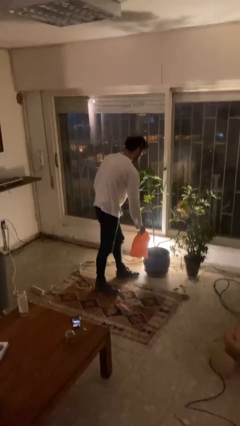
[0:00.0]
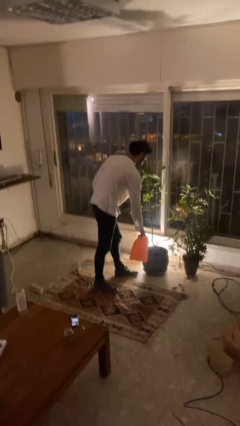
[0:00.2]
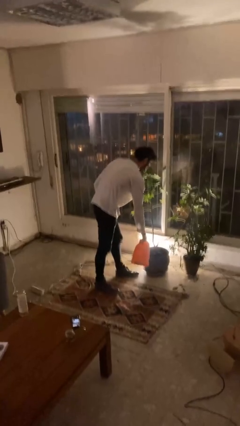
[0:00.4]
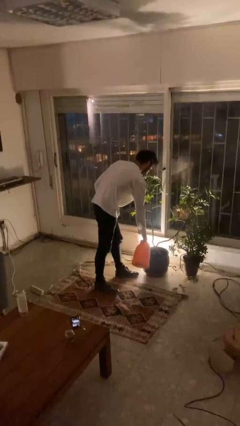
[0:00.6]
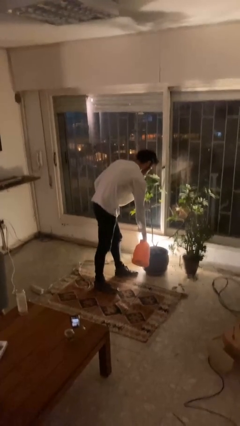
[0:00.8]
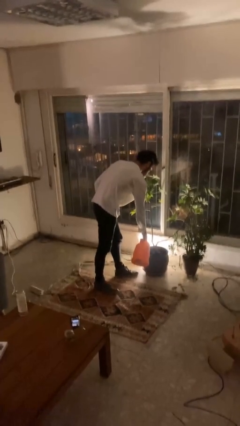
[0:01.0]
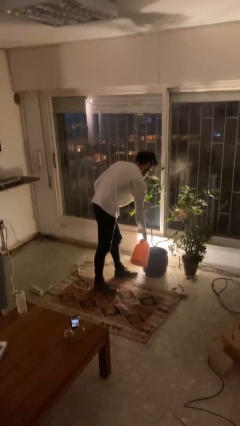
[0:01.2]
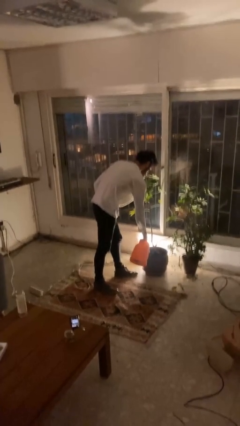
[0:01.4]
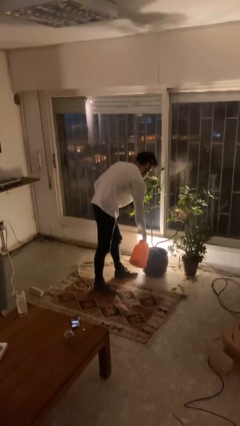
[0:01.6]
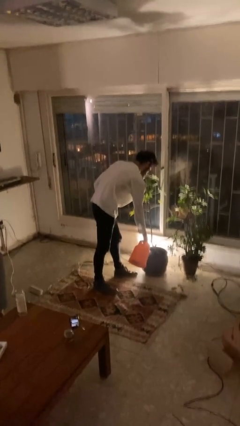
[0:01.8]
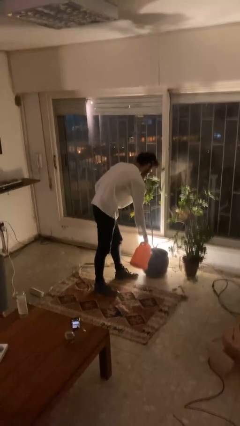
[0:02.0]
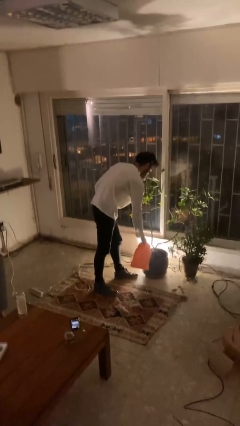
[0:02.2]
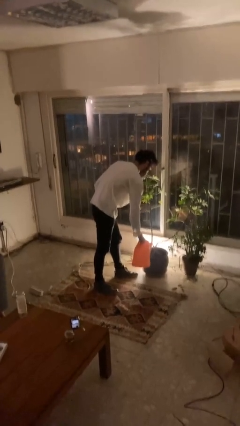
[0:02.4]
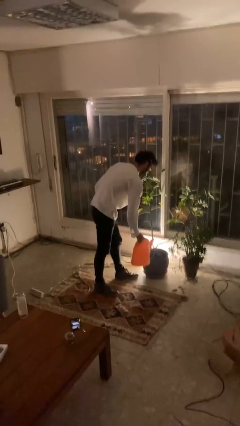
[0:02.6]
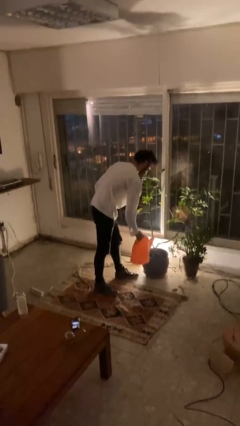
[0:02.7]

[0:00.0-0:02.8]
person waters houseplant

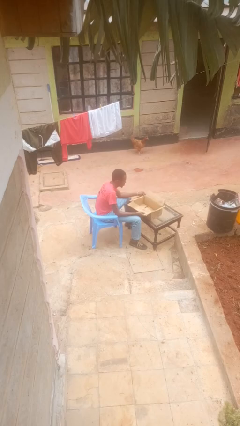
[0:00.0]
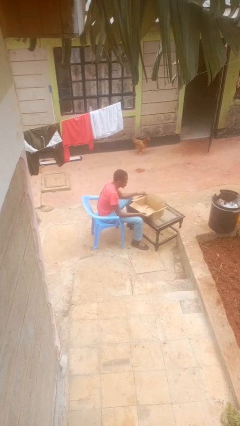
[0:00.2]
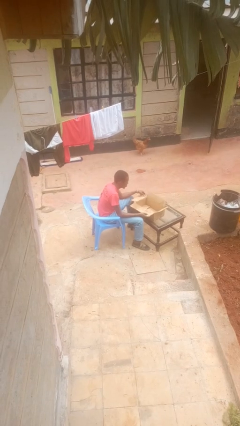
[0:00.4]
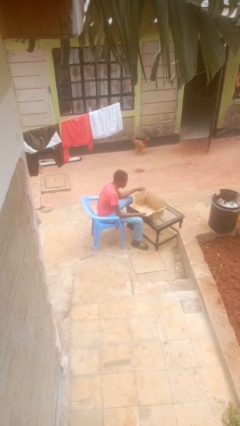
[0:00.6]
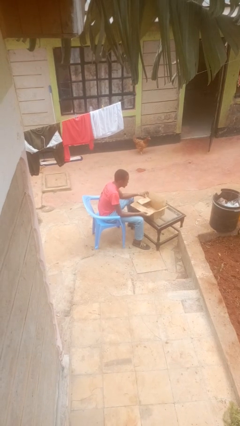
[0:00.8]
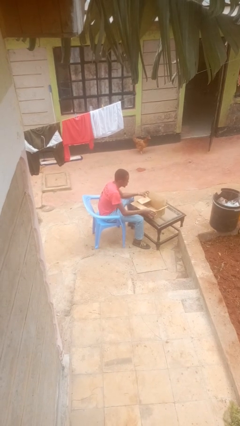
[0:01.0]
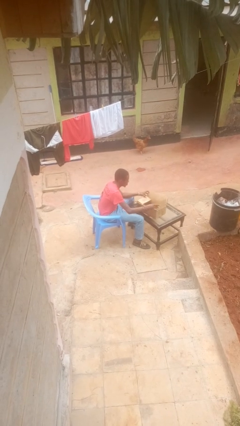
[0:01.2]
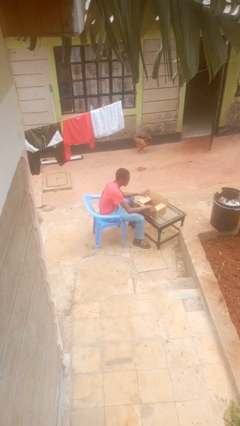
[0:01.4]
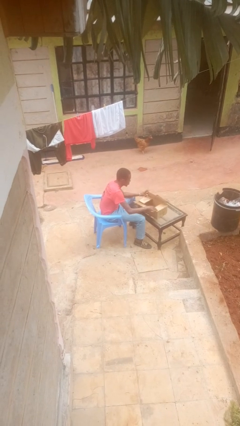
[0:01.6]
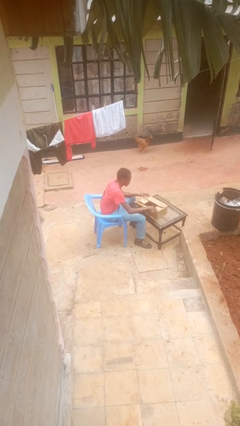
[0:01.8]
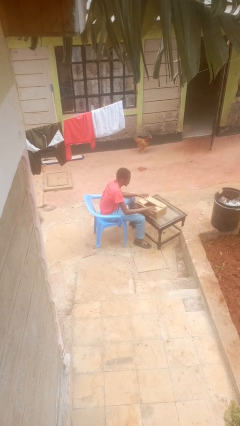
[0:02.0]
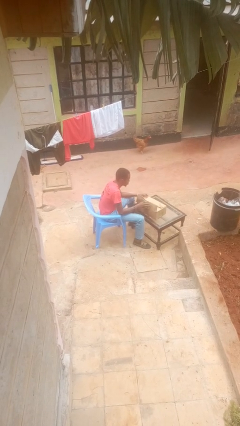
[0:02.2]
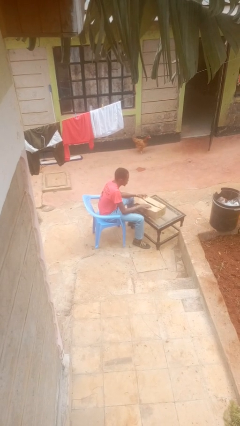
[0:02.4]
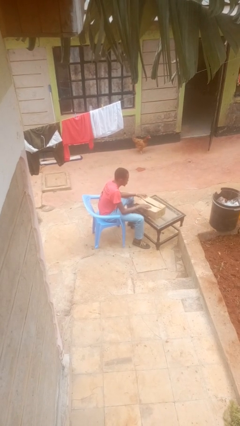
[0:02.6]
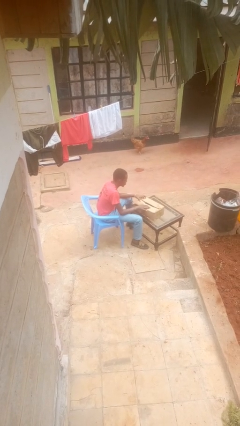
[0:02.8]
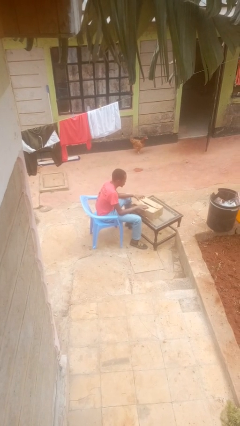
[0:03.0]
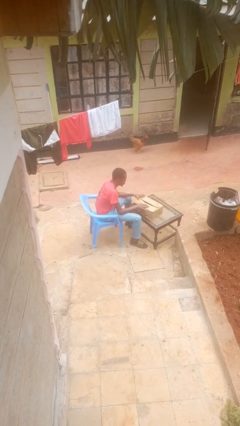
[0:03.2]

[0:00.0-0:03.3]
person closes box

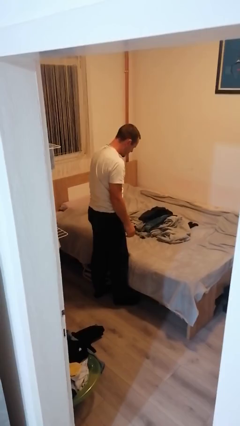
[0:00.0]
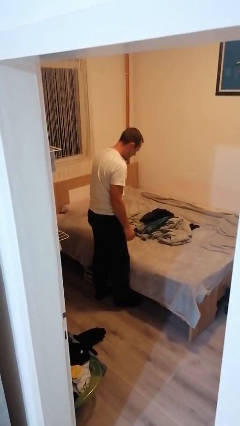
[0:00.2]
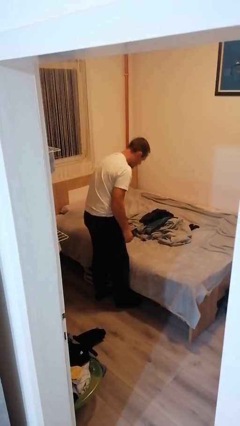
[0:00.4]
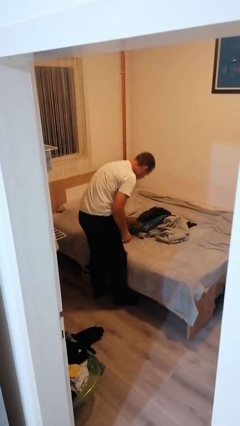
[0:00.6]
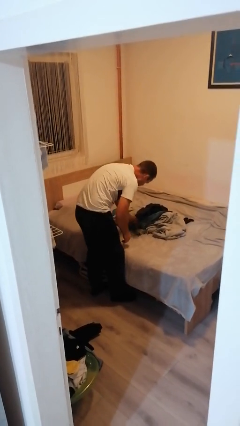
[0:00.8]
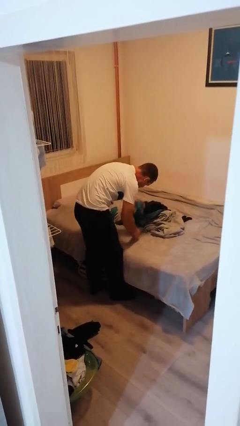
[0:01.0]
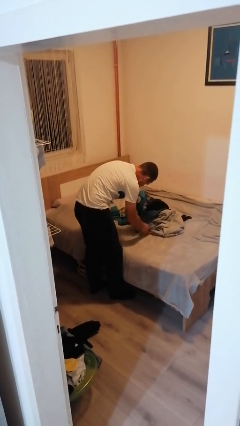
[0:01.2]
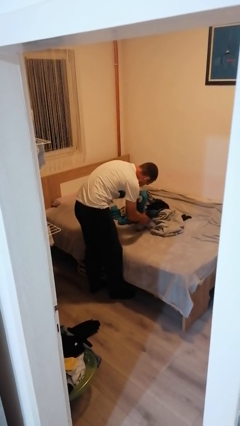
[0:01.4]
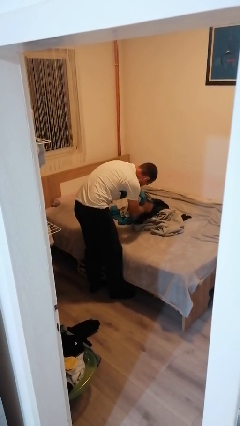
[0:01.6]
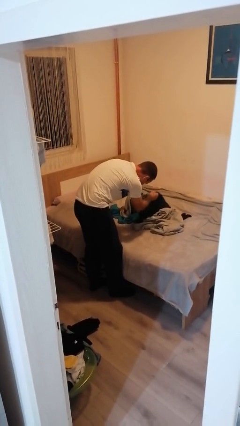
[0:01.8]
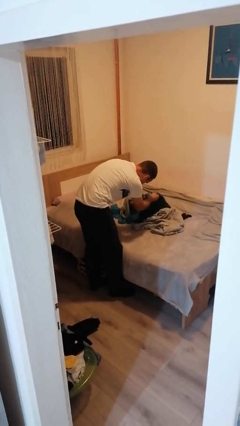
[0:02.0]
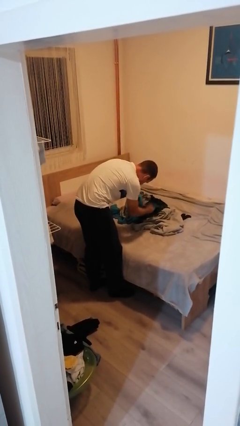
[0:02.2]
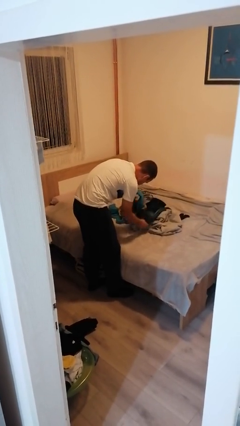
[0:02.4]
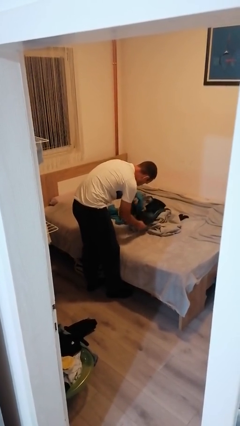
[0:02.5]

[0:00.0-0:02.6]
person searches under bed

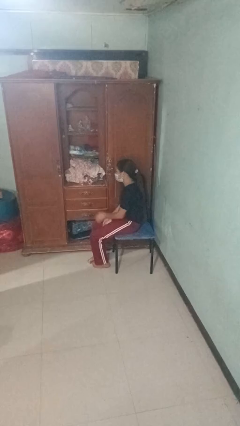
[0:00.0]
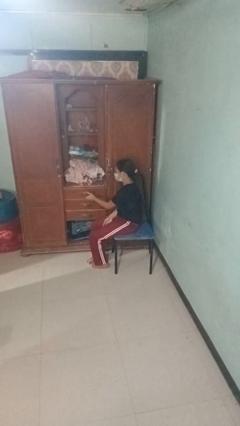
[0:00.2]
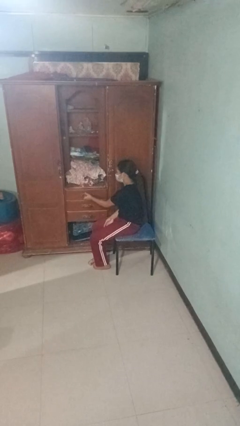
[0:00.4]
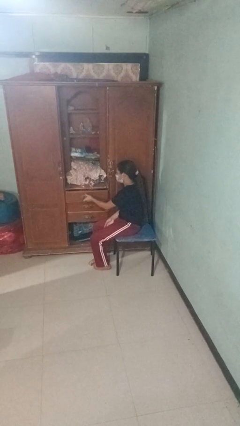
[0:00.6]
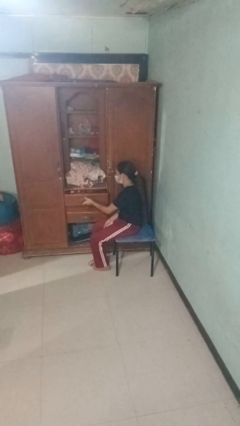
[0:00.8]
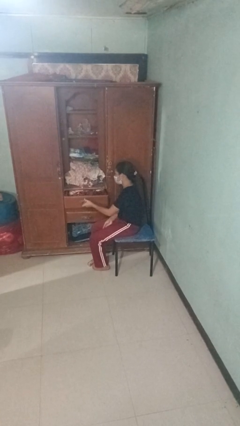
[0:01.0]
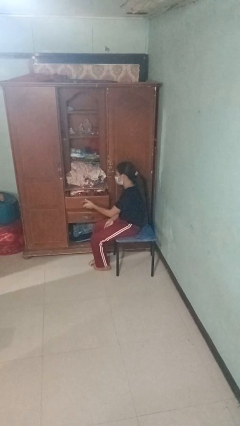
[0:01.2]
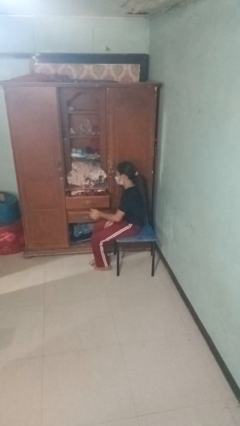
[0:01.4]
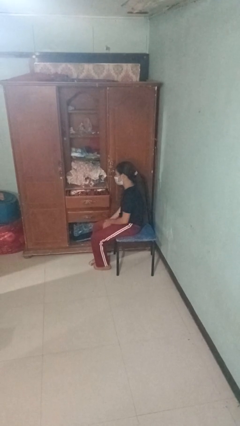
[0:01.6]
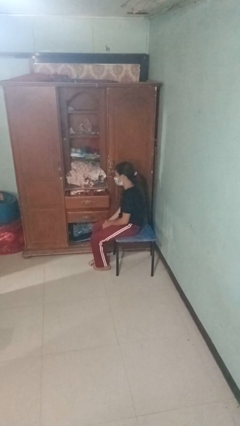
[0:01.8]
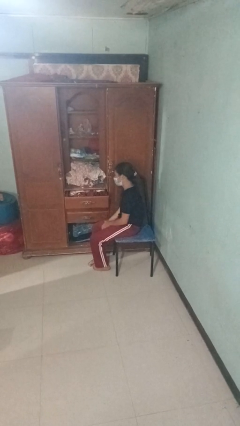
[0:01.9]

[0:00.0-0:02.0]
person opens dresser drawer

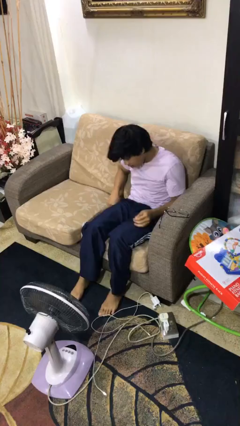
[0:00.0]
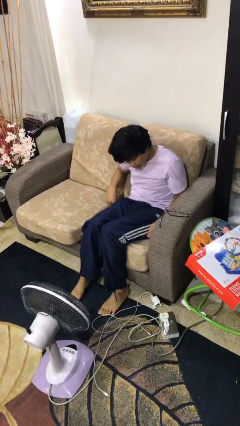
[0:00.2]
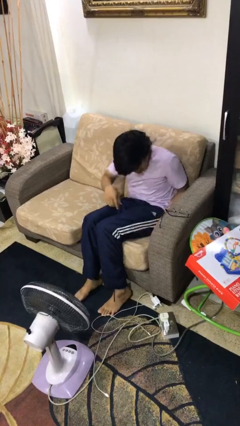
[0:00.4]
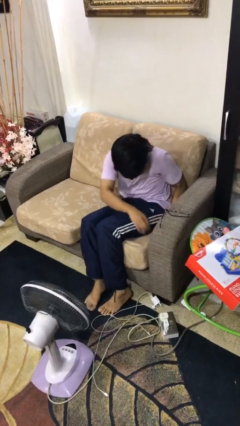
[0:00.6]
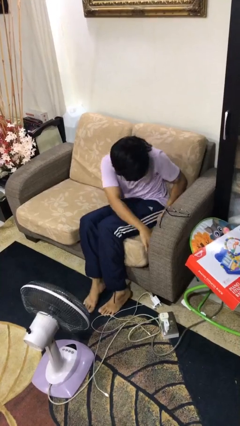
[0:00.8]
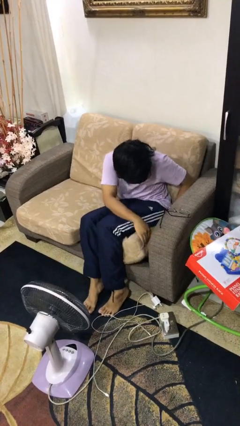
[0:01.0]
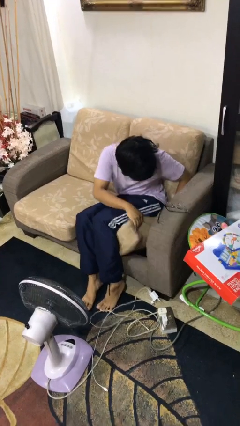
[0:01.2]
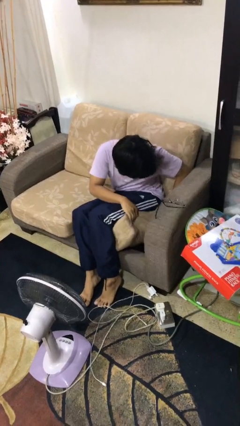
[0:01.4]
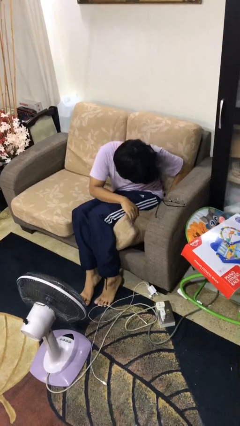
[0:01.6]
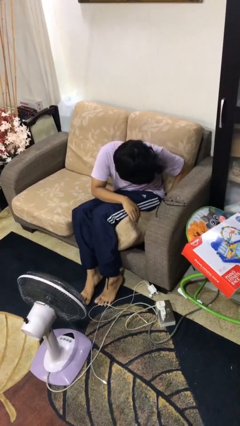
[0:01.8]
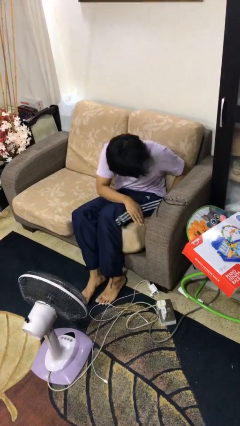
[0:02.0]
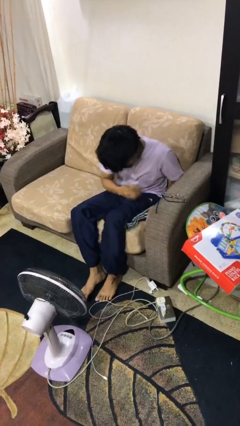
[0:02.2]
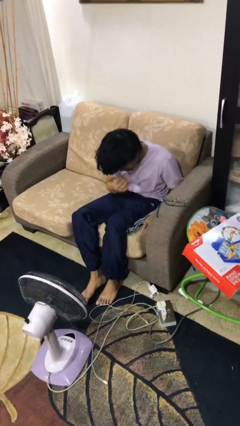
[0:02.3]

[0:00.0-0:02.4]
person searches in couch

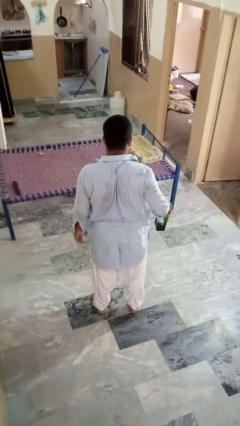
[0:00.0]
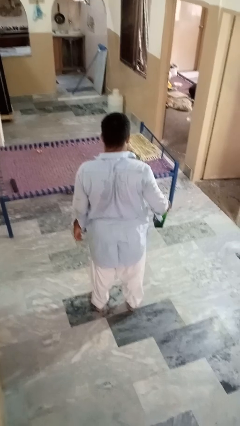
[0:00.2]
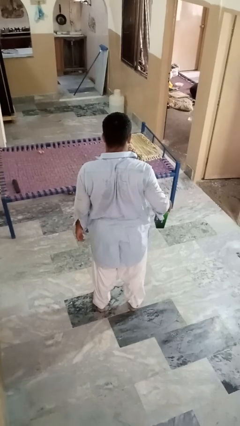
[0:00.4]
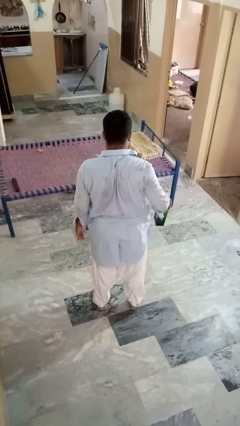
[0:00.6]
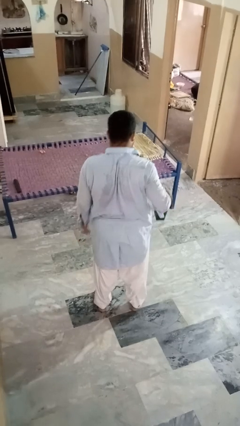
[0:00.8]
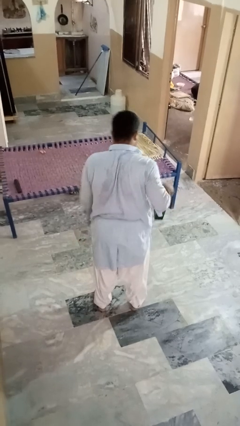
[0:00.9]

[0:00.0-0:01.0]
person drops object

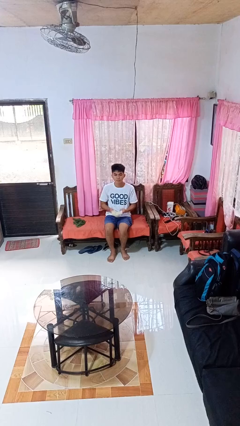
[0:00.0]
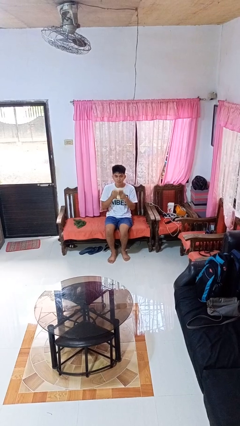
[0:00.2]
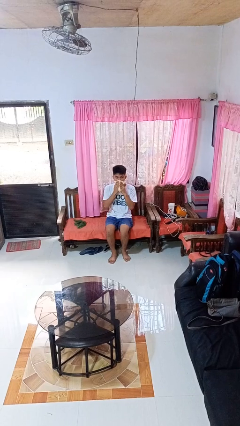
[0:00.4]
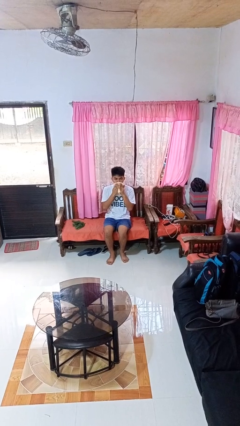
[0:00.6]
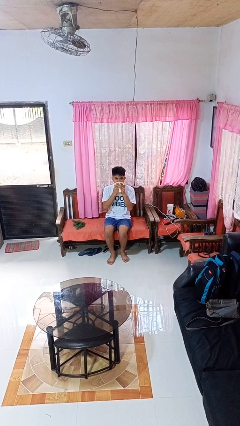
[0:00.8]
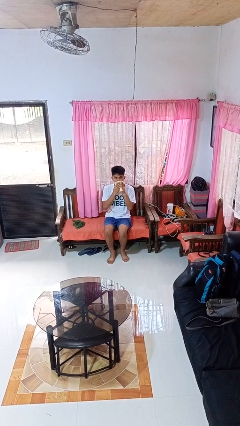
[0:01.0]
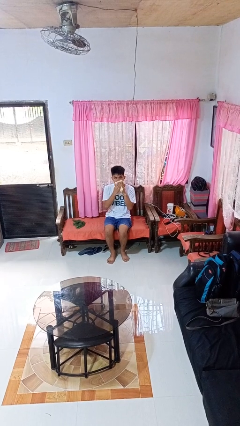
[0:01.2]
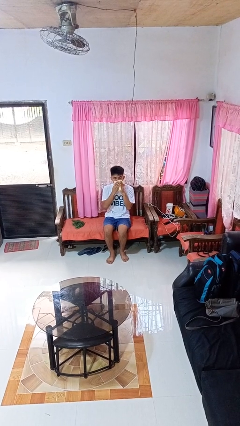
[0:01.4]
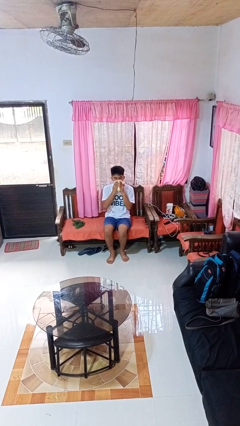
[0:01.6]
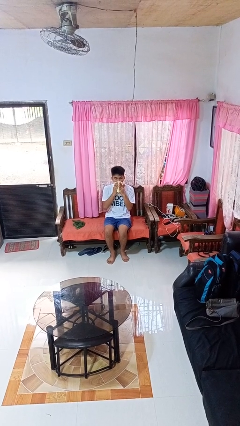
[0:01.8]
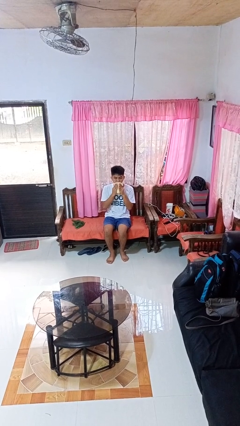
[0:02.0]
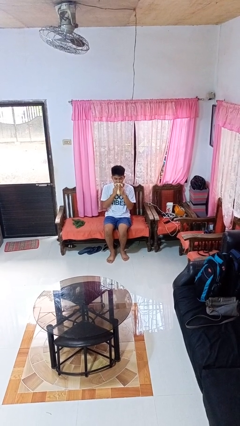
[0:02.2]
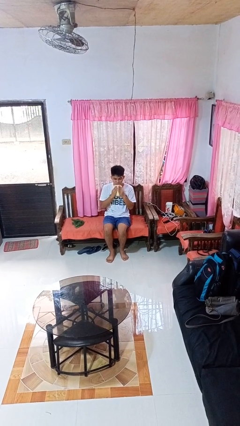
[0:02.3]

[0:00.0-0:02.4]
person wipes mouth with napkin

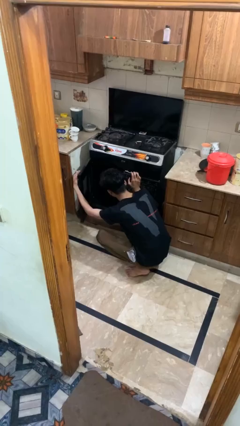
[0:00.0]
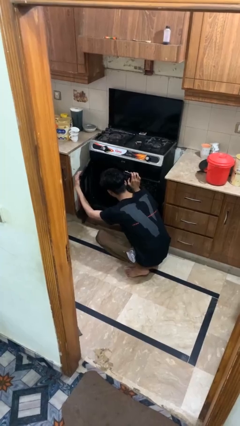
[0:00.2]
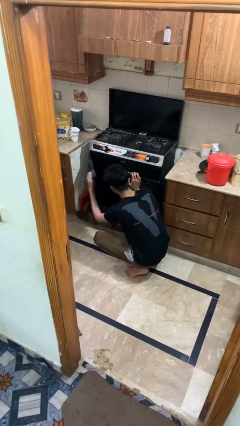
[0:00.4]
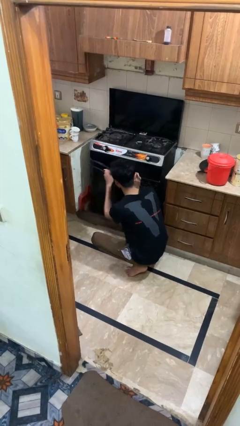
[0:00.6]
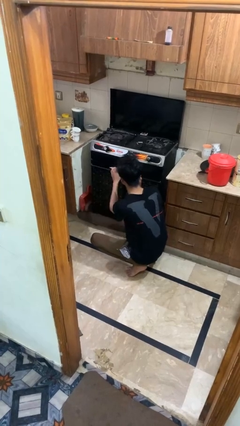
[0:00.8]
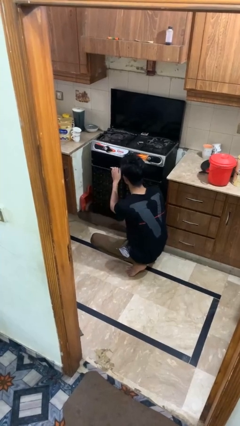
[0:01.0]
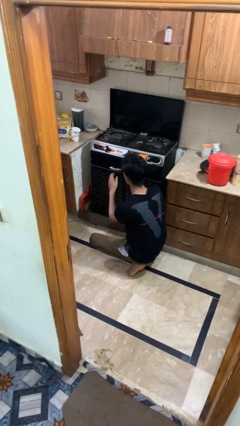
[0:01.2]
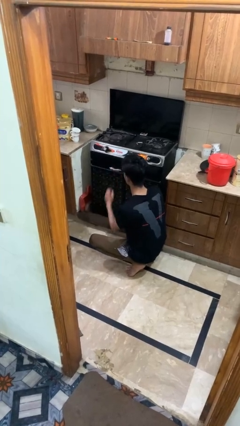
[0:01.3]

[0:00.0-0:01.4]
person closes oven door
